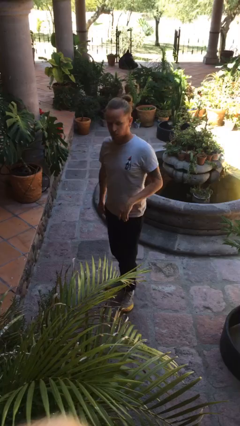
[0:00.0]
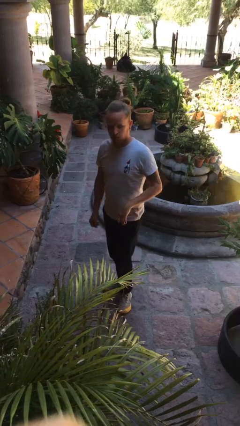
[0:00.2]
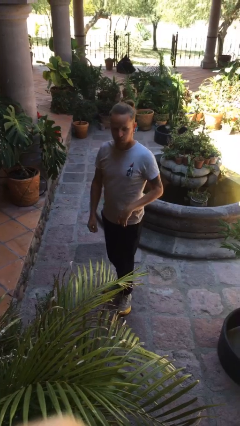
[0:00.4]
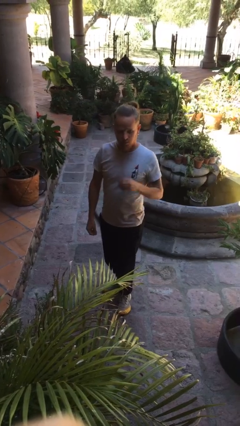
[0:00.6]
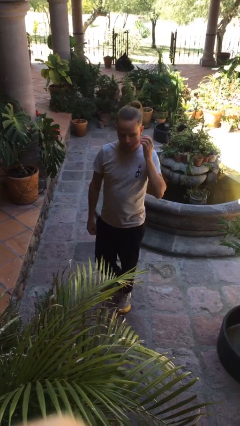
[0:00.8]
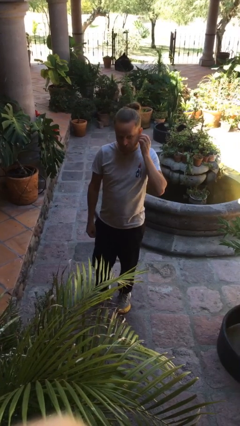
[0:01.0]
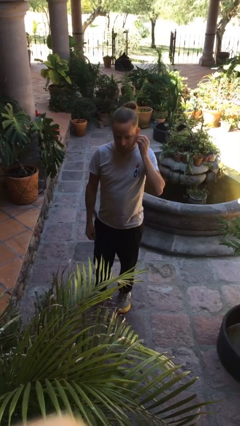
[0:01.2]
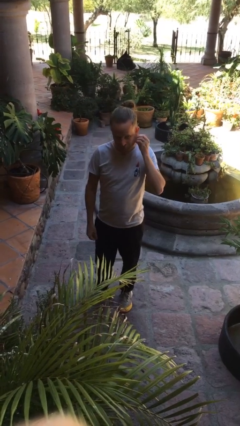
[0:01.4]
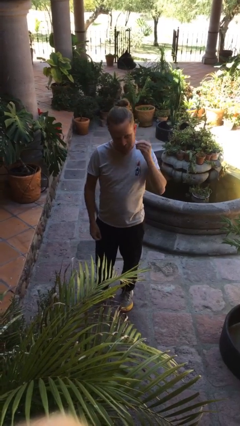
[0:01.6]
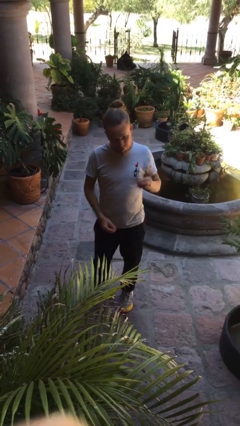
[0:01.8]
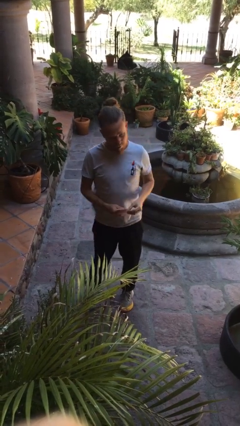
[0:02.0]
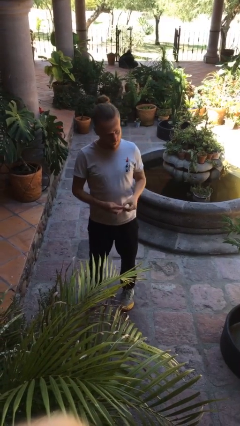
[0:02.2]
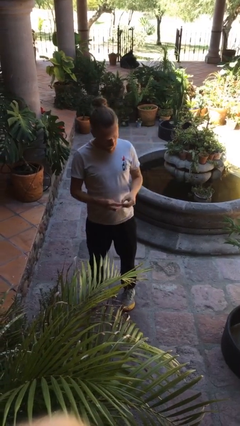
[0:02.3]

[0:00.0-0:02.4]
person takes off earrings

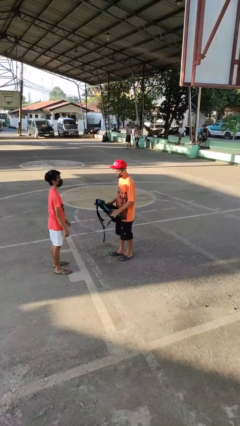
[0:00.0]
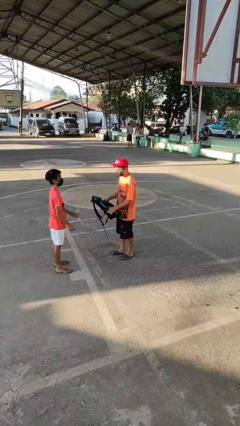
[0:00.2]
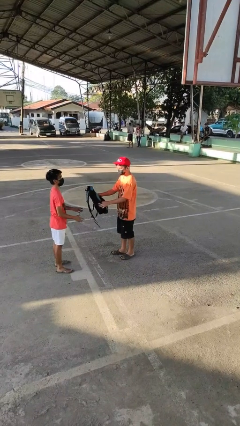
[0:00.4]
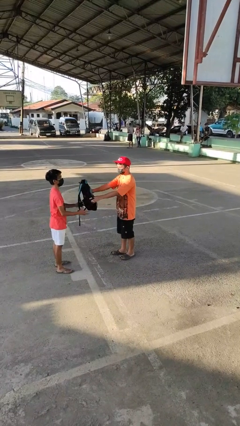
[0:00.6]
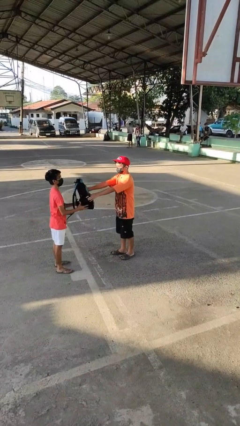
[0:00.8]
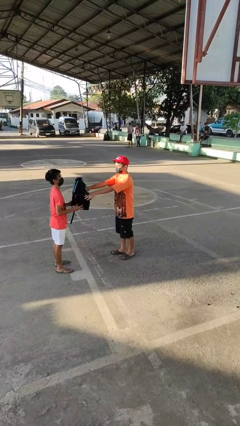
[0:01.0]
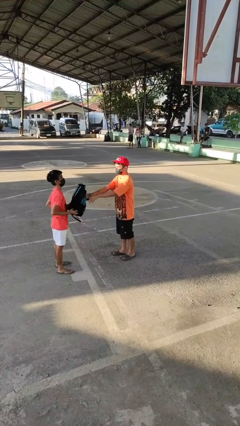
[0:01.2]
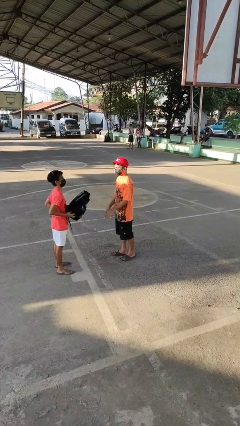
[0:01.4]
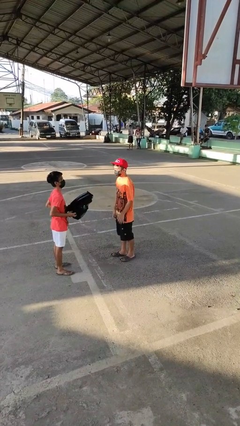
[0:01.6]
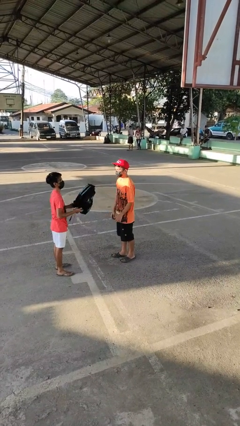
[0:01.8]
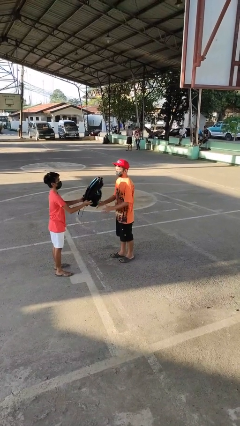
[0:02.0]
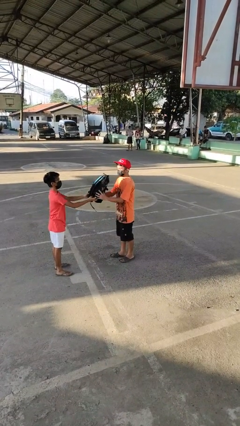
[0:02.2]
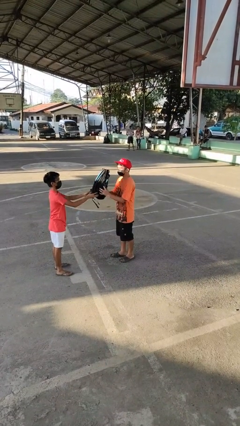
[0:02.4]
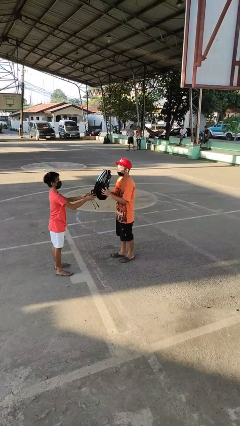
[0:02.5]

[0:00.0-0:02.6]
person transfers object to person

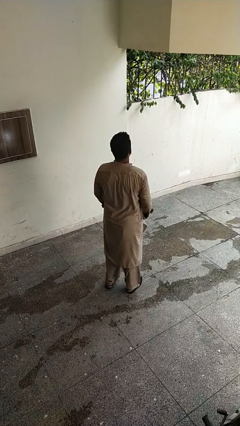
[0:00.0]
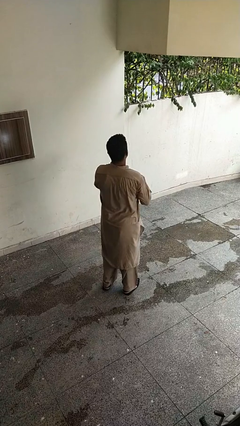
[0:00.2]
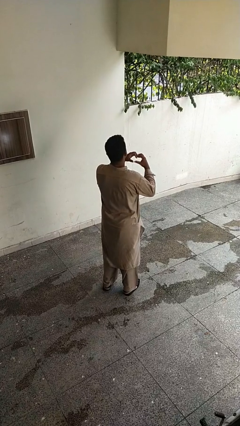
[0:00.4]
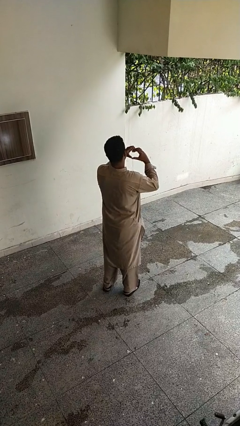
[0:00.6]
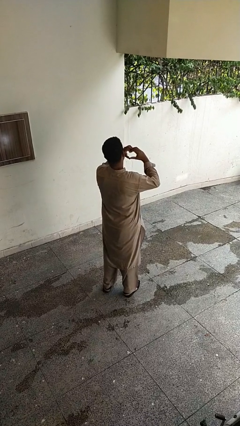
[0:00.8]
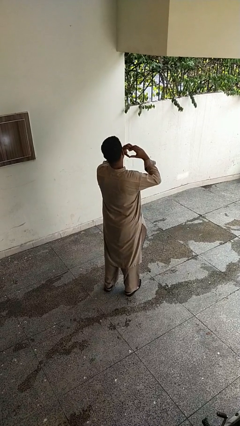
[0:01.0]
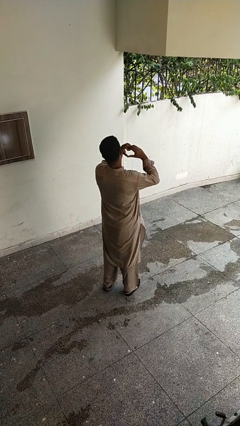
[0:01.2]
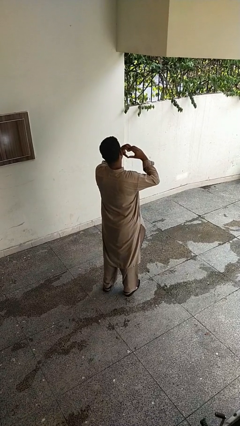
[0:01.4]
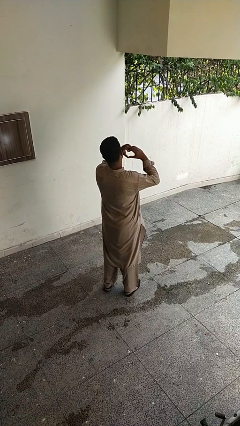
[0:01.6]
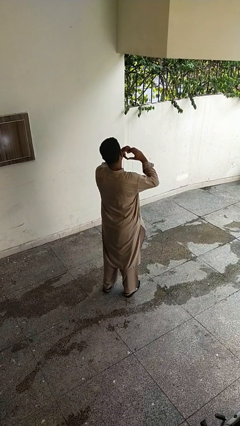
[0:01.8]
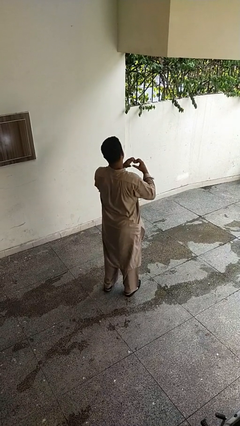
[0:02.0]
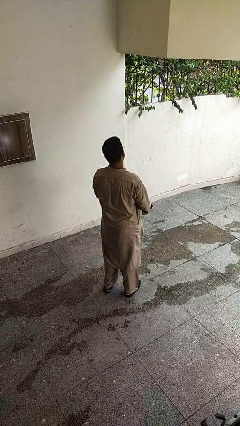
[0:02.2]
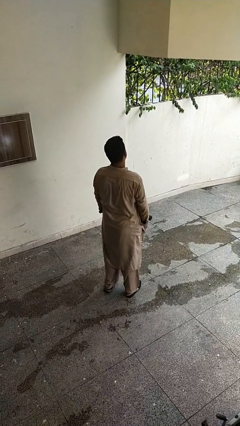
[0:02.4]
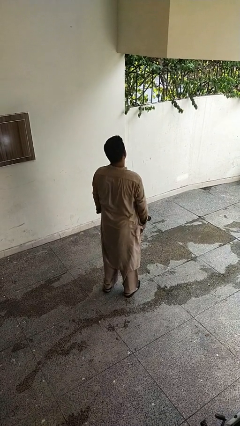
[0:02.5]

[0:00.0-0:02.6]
person gestures heart

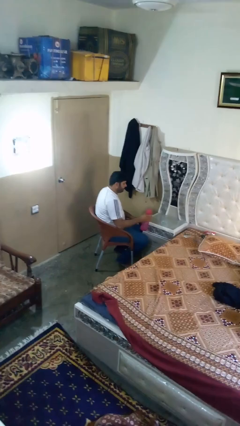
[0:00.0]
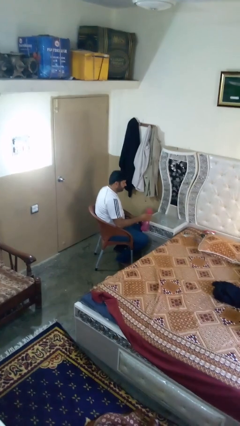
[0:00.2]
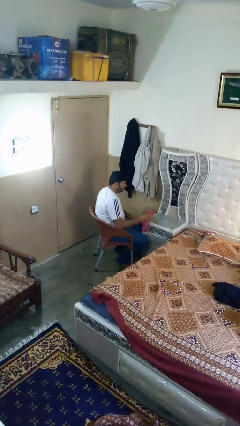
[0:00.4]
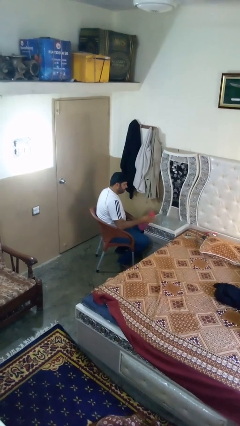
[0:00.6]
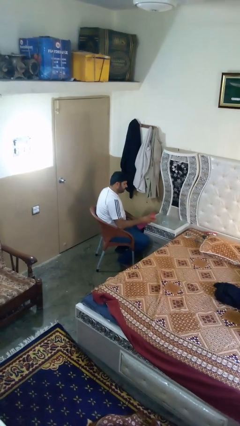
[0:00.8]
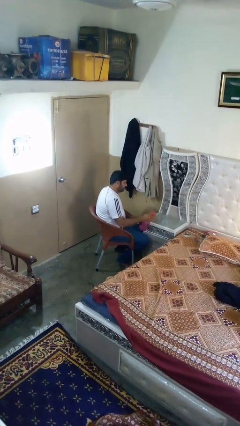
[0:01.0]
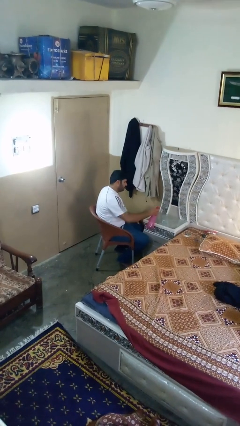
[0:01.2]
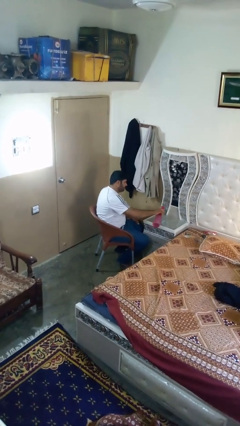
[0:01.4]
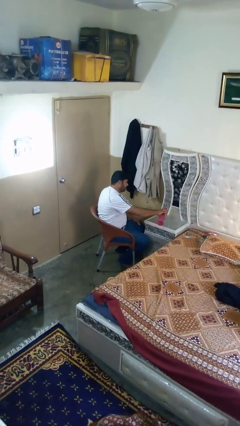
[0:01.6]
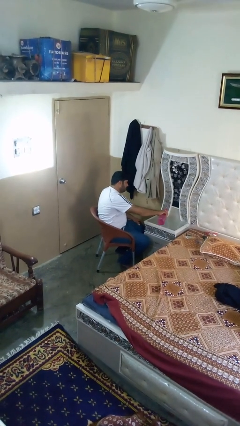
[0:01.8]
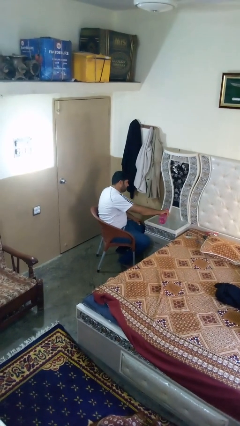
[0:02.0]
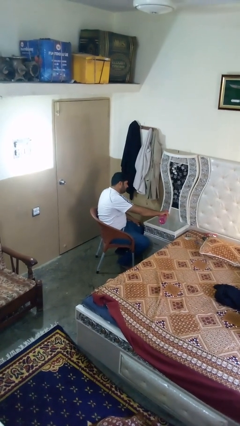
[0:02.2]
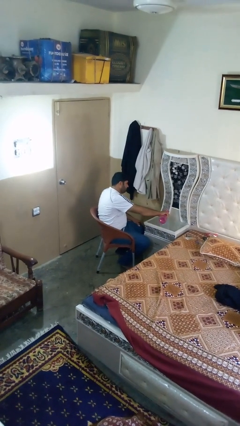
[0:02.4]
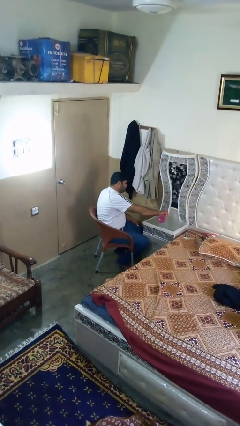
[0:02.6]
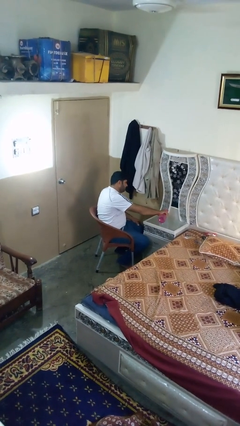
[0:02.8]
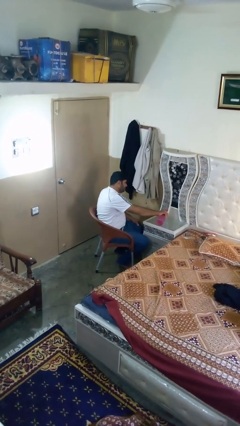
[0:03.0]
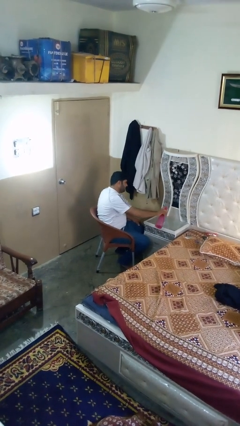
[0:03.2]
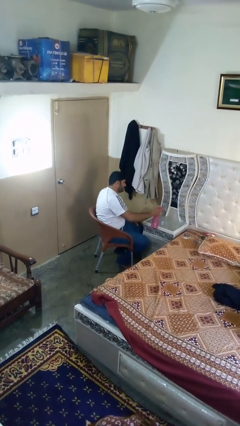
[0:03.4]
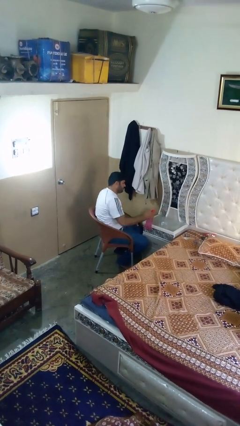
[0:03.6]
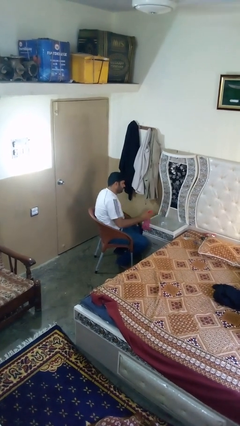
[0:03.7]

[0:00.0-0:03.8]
person pours liquid into cup

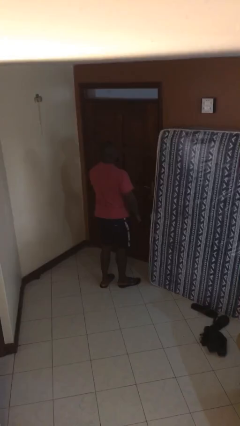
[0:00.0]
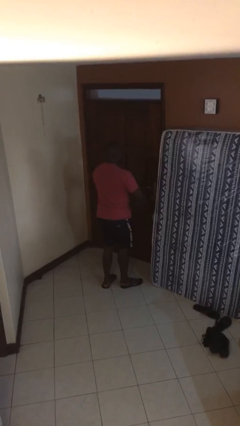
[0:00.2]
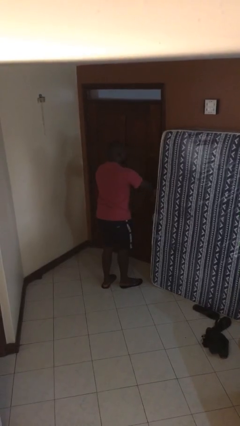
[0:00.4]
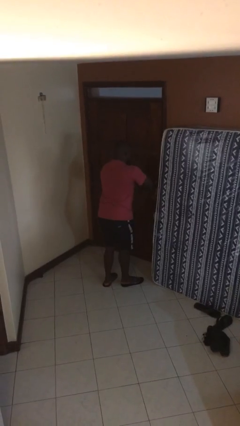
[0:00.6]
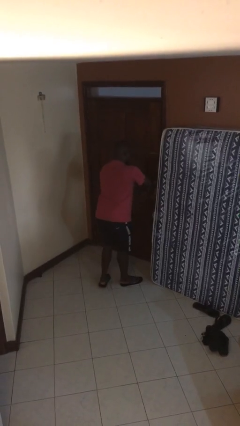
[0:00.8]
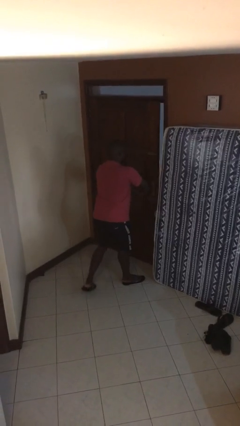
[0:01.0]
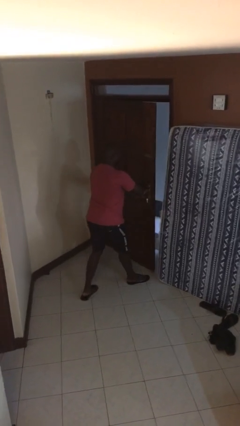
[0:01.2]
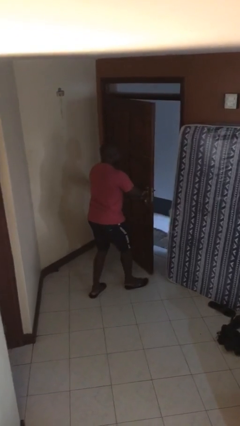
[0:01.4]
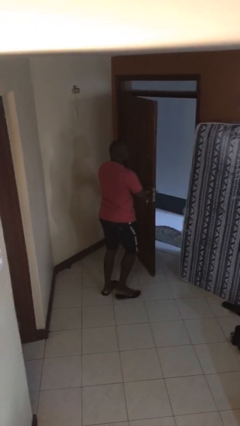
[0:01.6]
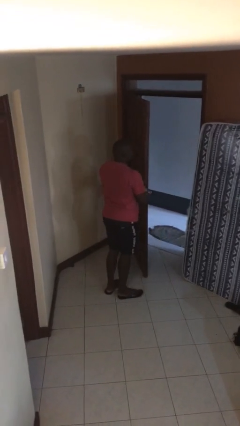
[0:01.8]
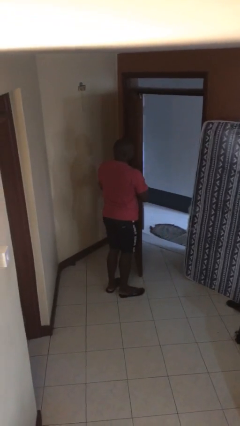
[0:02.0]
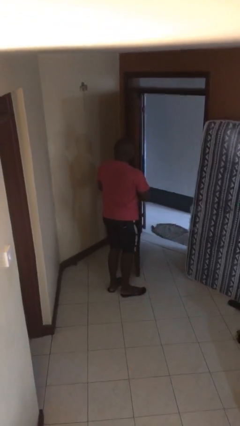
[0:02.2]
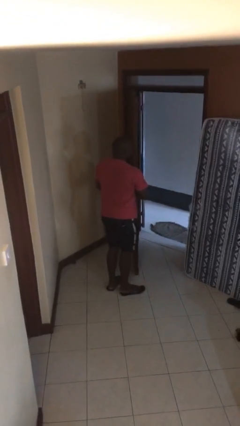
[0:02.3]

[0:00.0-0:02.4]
person opens facility door

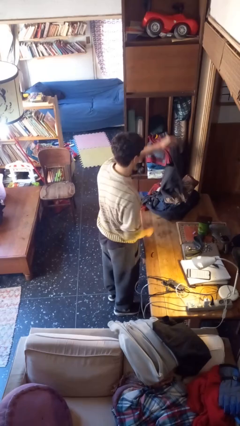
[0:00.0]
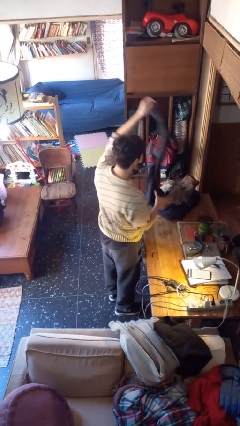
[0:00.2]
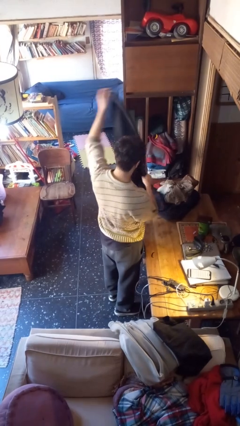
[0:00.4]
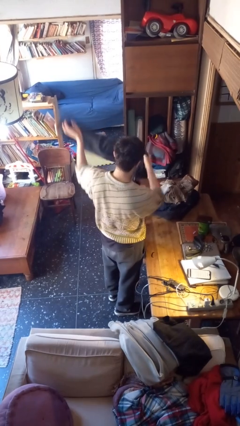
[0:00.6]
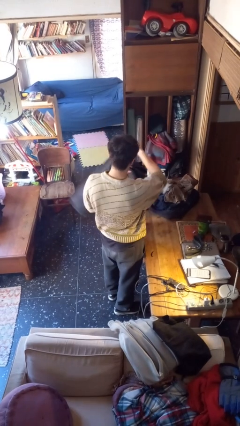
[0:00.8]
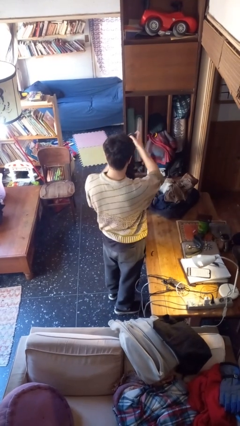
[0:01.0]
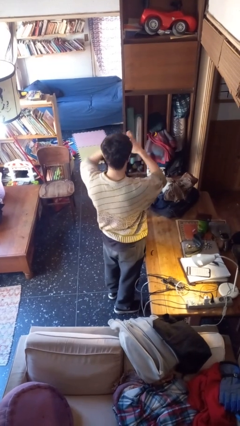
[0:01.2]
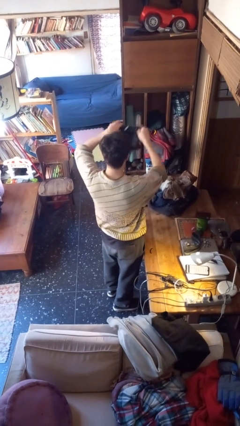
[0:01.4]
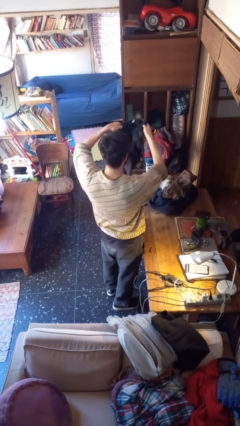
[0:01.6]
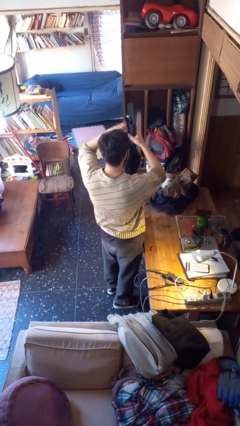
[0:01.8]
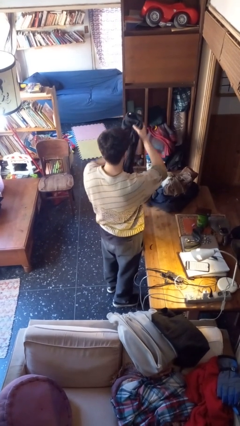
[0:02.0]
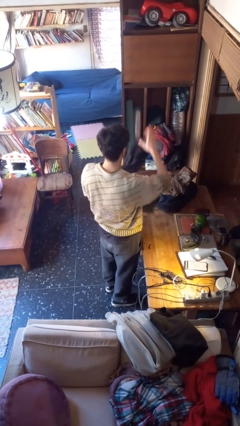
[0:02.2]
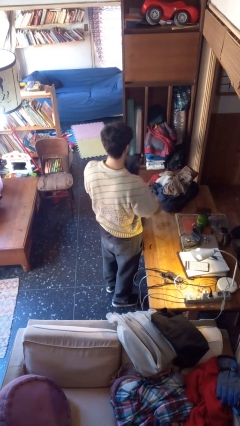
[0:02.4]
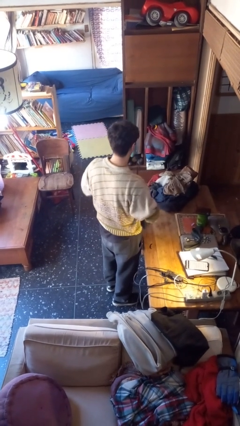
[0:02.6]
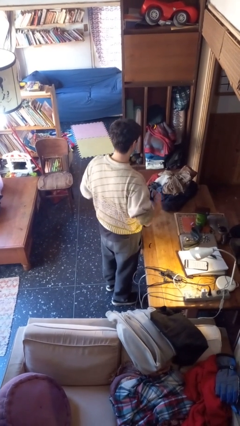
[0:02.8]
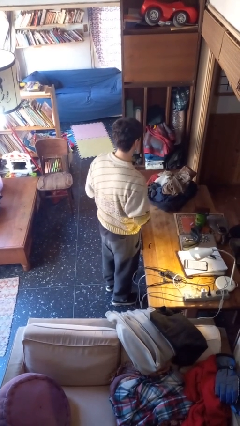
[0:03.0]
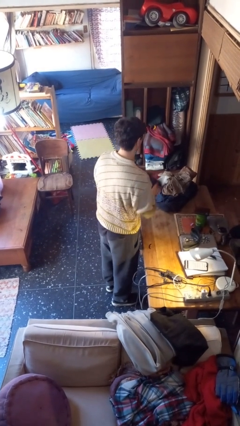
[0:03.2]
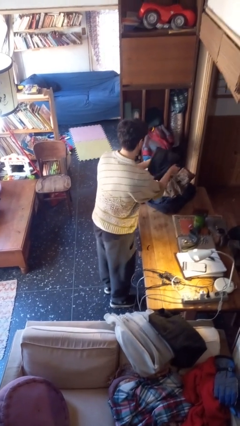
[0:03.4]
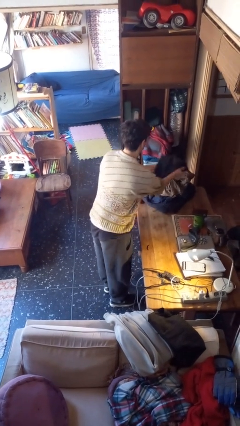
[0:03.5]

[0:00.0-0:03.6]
person folds pants
